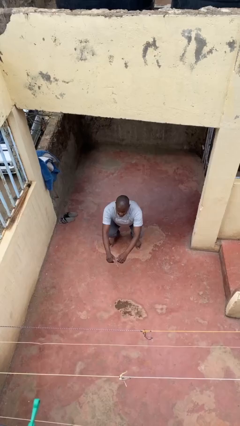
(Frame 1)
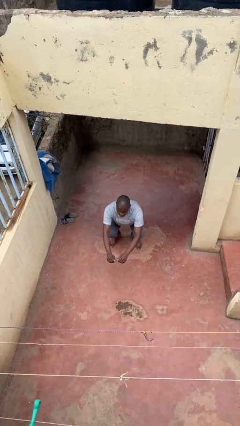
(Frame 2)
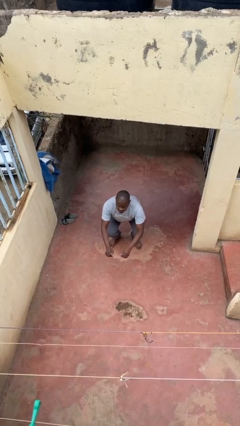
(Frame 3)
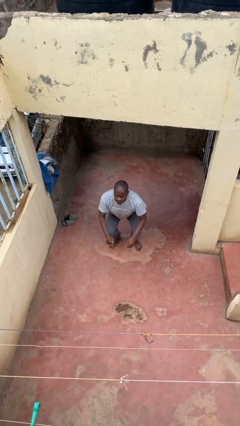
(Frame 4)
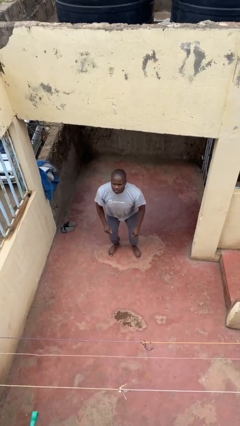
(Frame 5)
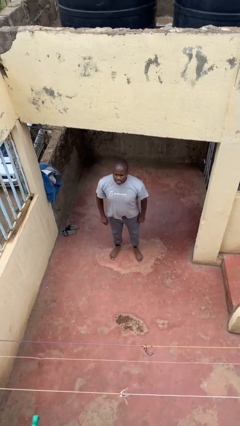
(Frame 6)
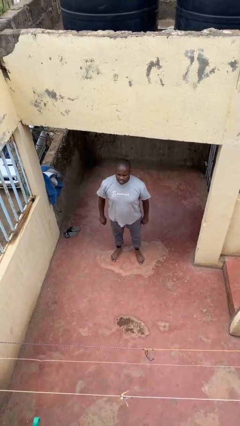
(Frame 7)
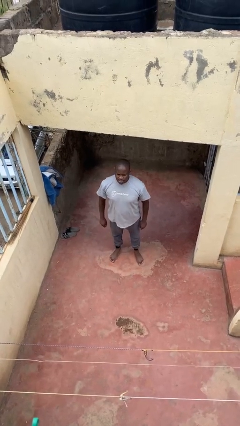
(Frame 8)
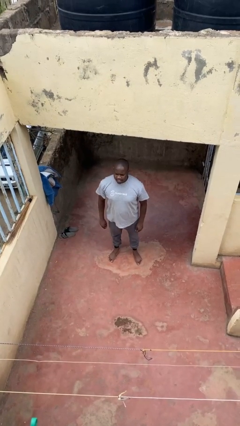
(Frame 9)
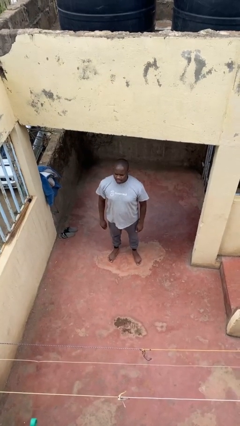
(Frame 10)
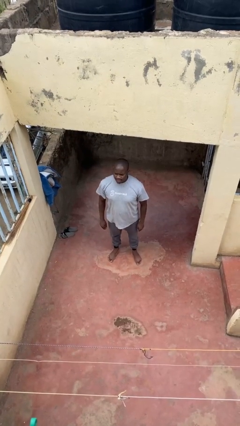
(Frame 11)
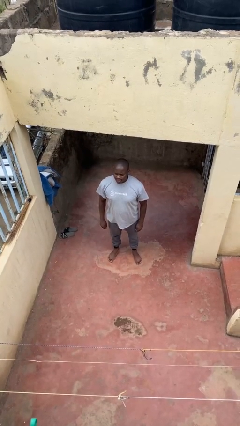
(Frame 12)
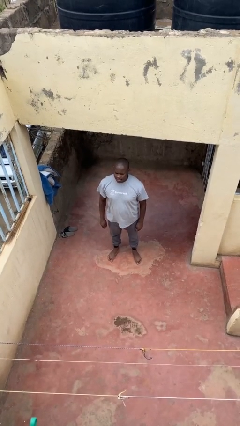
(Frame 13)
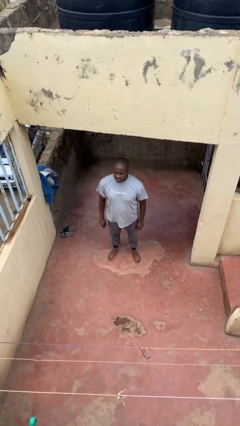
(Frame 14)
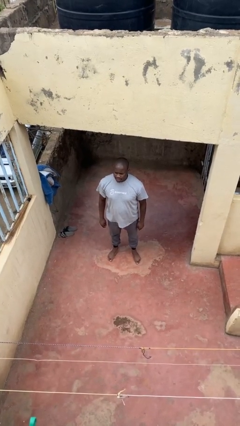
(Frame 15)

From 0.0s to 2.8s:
person stands up

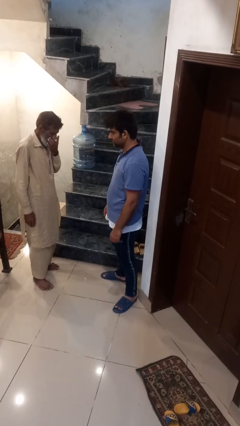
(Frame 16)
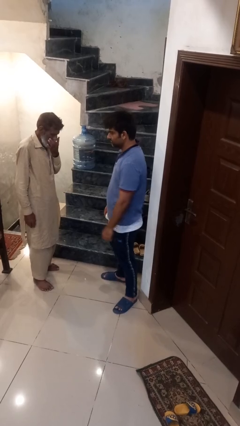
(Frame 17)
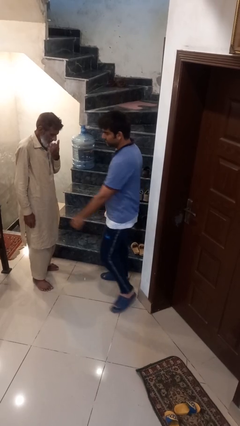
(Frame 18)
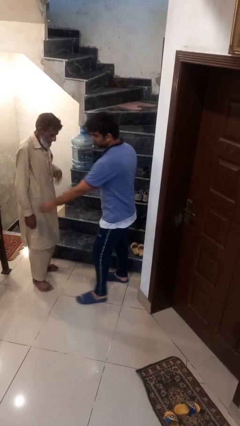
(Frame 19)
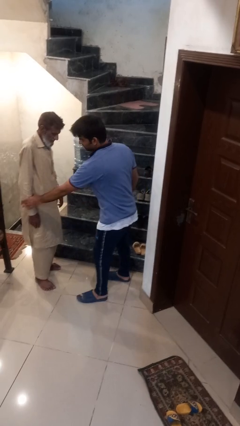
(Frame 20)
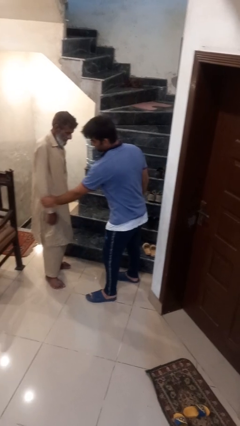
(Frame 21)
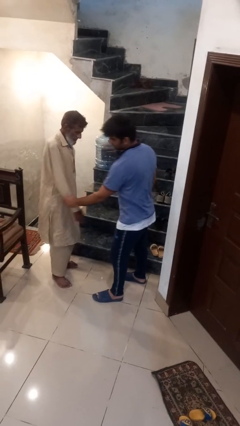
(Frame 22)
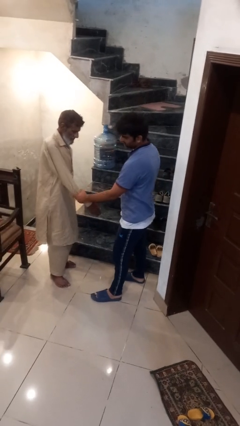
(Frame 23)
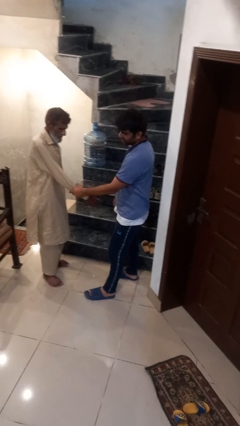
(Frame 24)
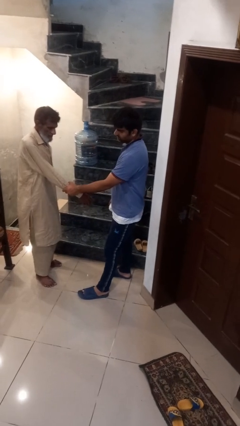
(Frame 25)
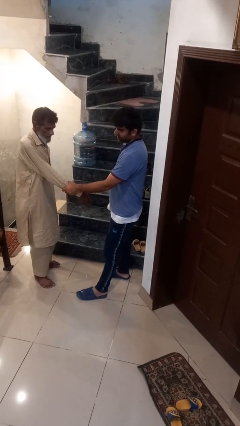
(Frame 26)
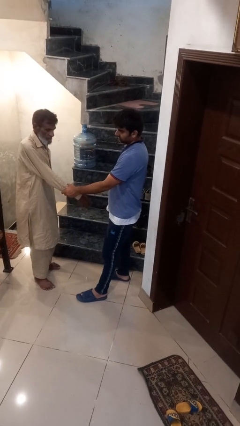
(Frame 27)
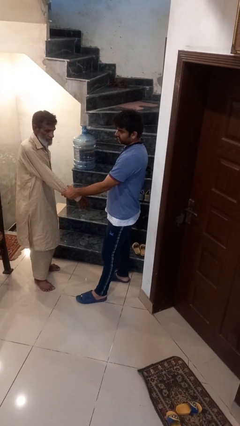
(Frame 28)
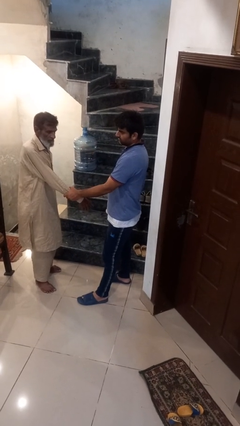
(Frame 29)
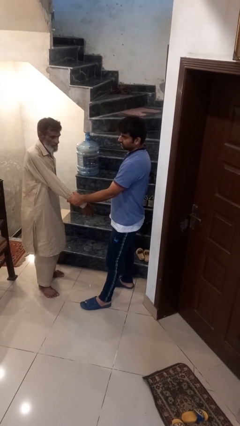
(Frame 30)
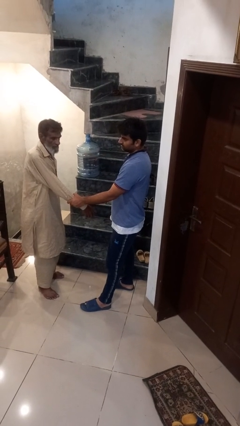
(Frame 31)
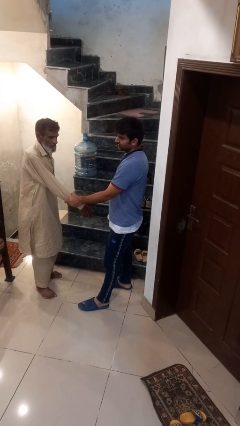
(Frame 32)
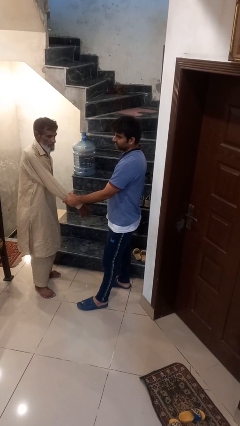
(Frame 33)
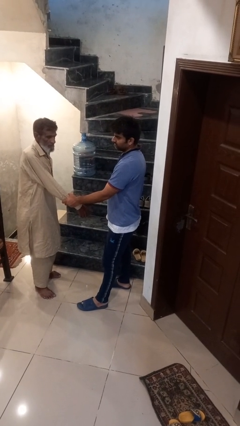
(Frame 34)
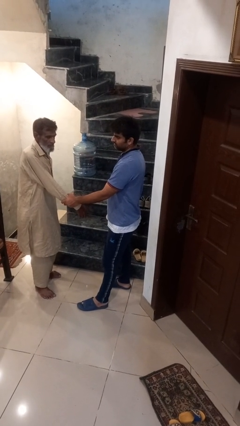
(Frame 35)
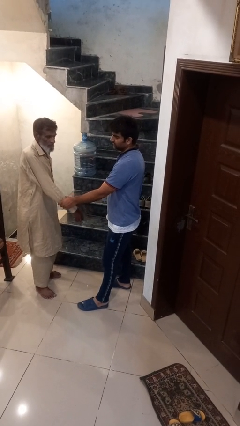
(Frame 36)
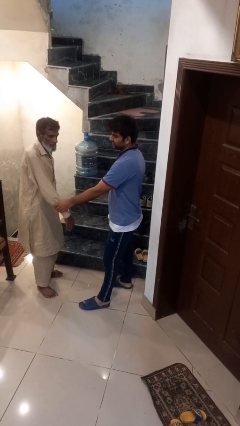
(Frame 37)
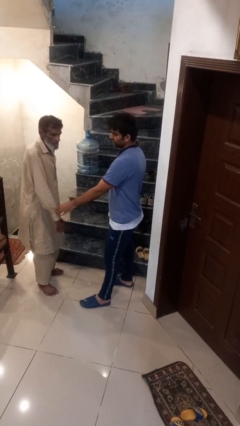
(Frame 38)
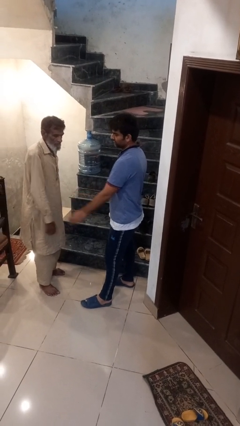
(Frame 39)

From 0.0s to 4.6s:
person grabs person by forearm

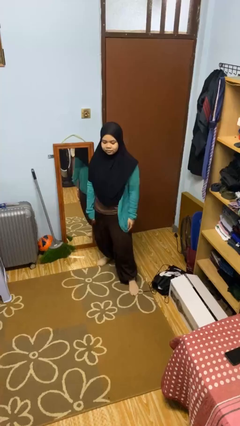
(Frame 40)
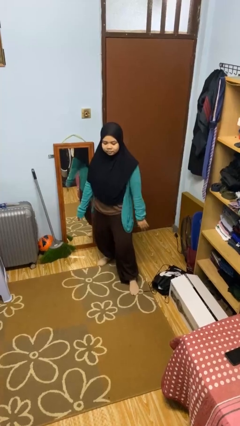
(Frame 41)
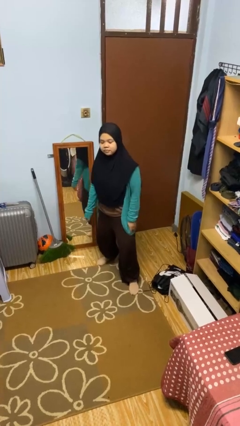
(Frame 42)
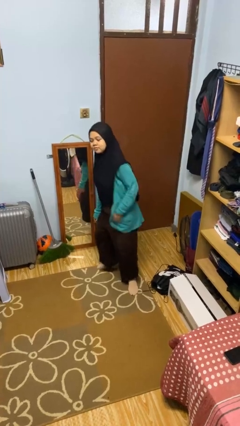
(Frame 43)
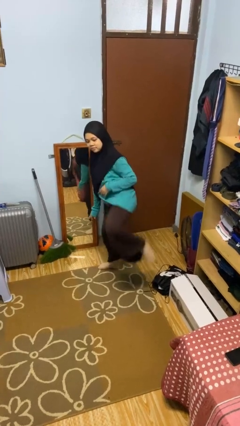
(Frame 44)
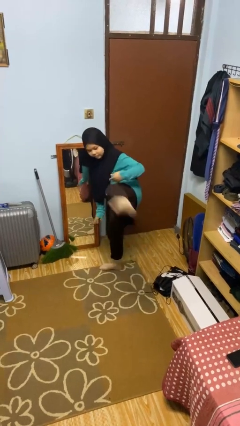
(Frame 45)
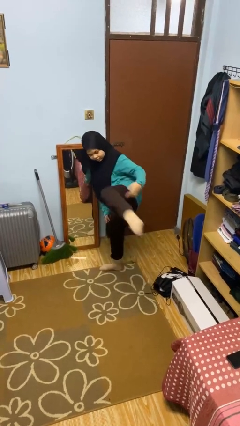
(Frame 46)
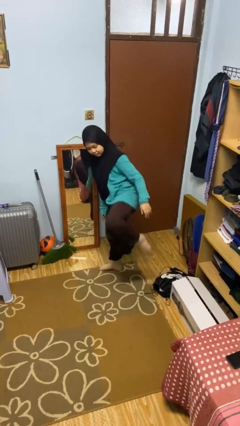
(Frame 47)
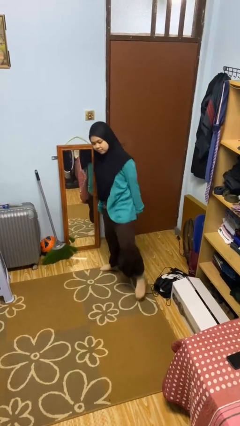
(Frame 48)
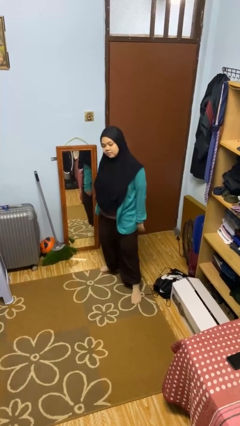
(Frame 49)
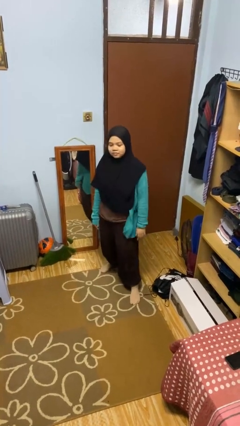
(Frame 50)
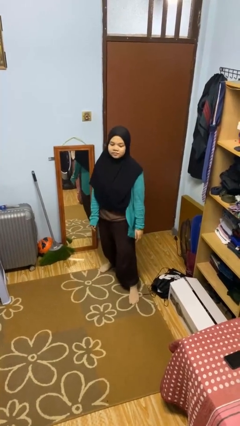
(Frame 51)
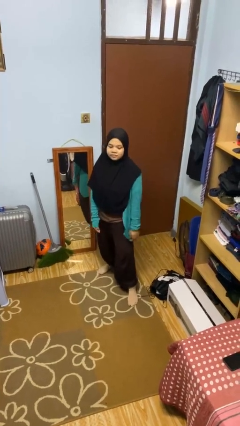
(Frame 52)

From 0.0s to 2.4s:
person karate kicks

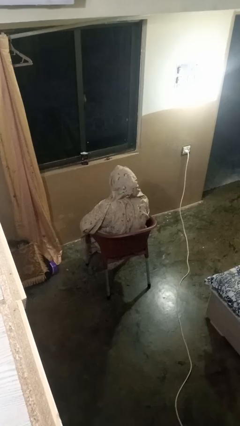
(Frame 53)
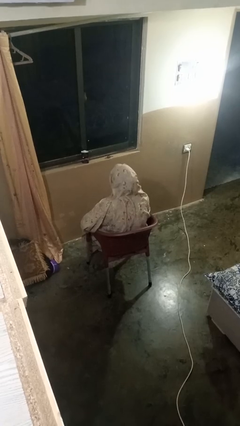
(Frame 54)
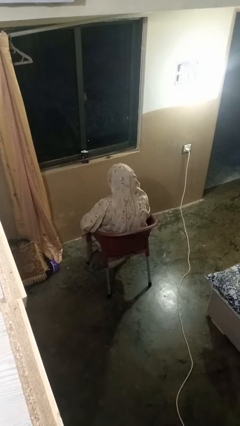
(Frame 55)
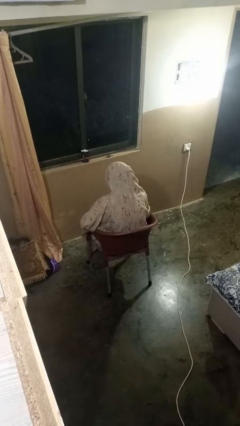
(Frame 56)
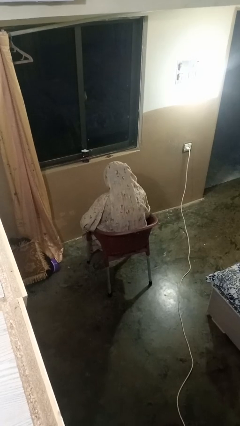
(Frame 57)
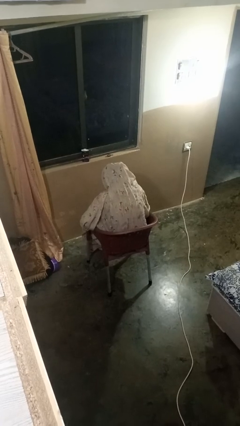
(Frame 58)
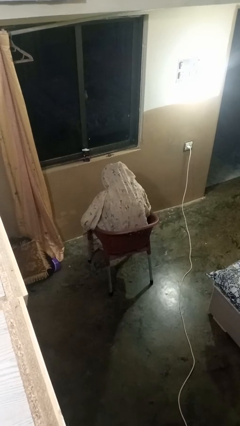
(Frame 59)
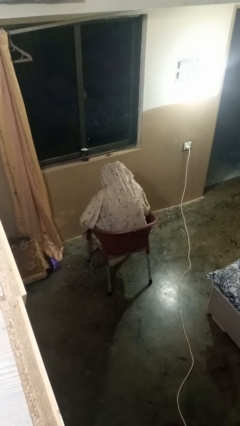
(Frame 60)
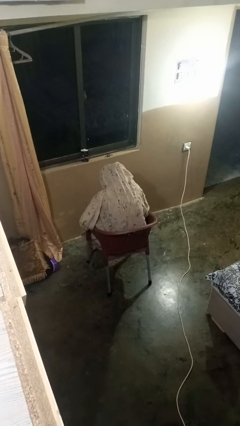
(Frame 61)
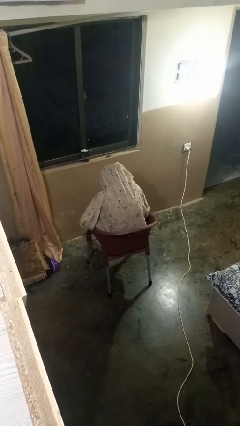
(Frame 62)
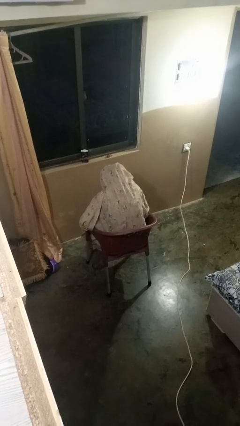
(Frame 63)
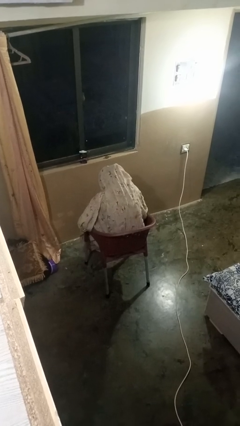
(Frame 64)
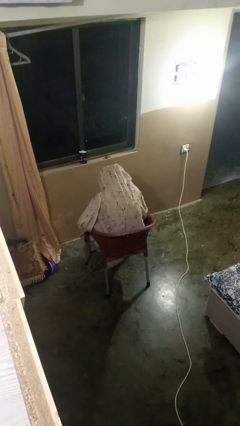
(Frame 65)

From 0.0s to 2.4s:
person looks at hands in lap

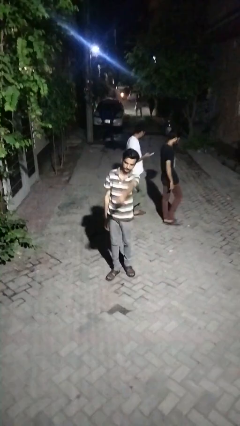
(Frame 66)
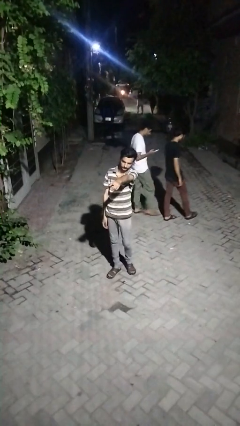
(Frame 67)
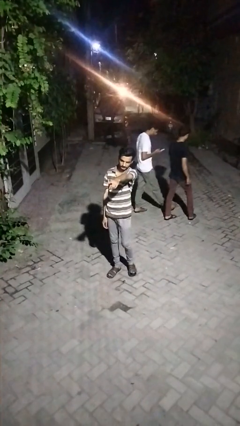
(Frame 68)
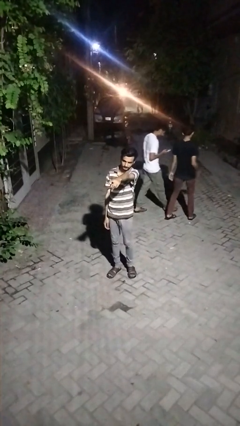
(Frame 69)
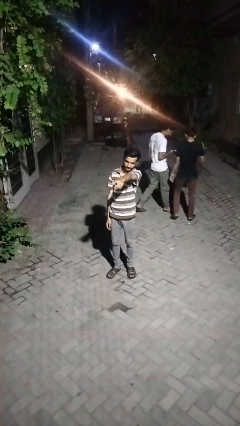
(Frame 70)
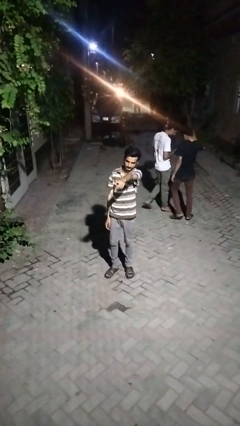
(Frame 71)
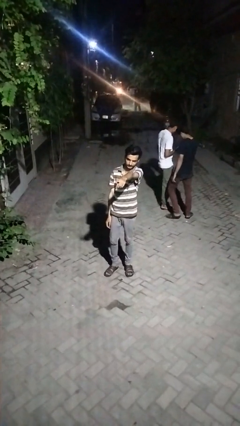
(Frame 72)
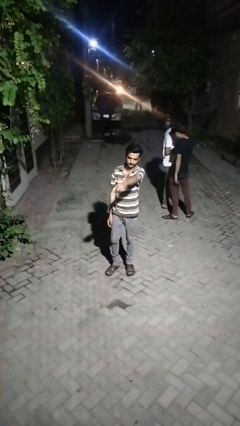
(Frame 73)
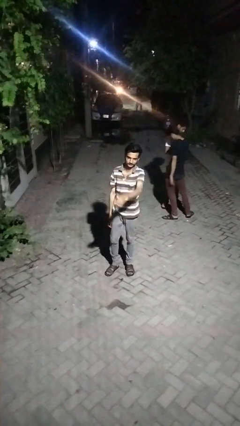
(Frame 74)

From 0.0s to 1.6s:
person points at person

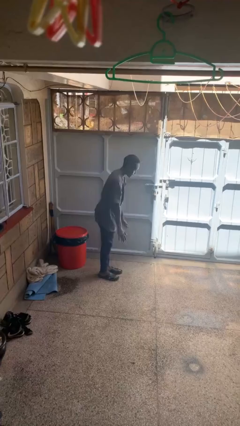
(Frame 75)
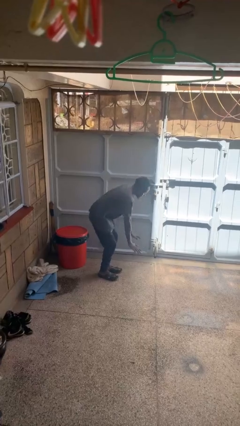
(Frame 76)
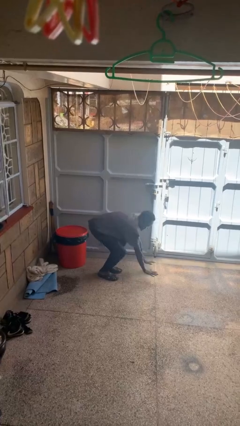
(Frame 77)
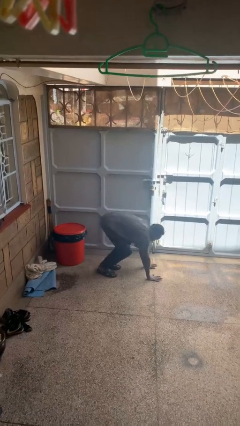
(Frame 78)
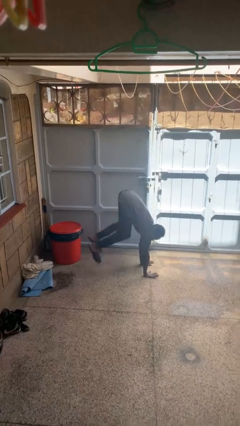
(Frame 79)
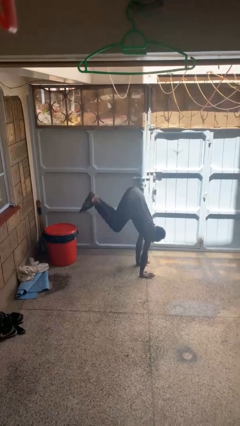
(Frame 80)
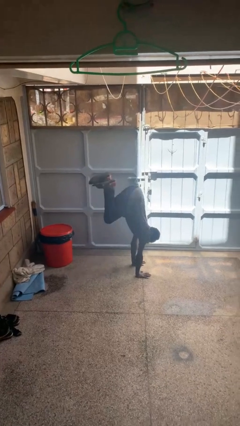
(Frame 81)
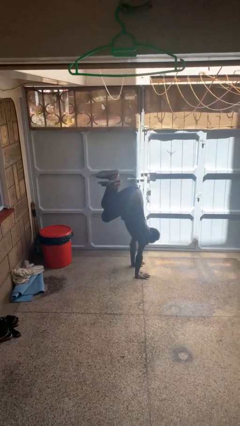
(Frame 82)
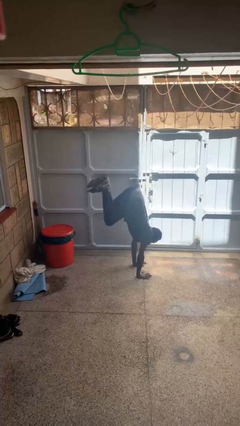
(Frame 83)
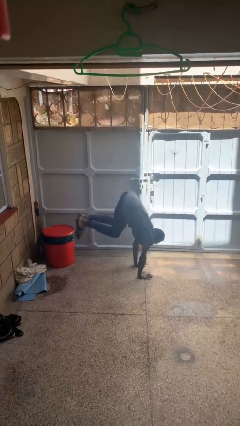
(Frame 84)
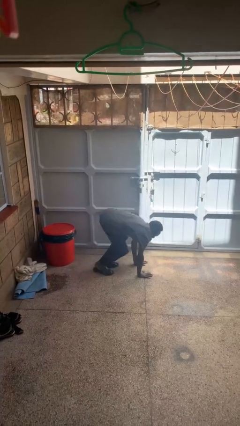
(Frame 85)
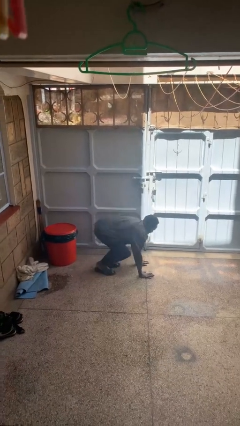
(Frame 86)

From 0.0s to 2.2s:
person handstand

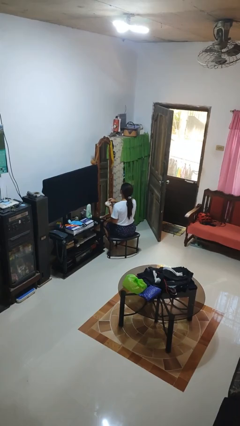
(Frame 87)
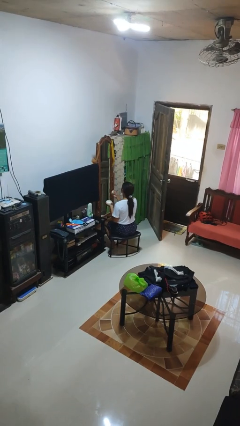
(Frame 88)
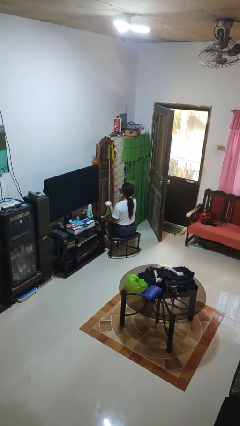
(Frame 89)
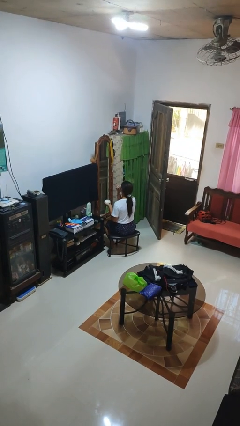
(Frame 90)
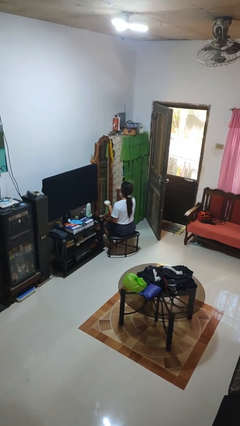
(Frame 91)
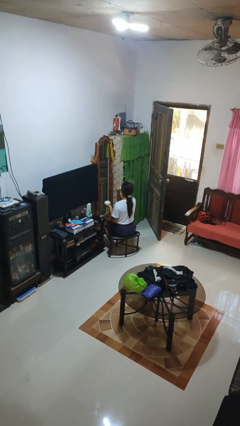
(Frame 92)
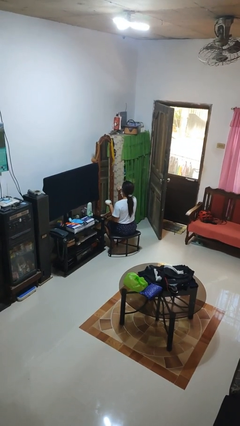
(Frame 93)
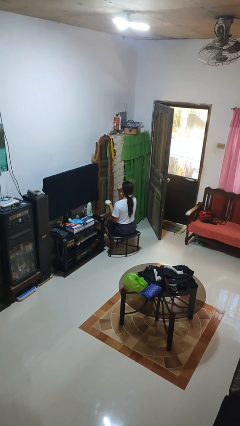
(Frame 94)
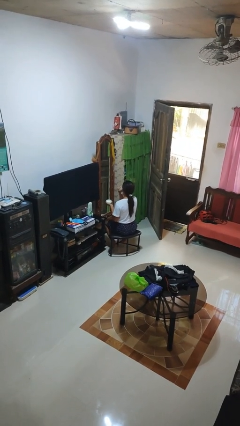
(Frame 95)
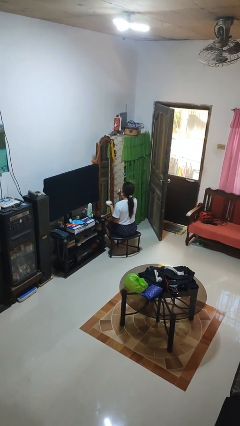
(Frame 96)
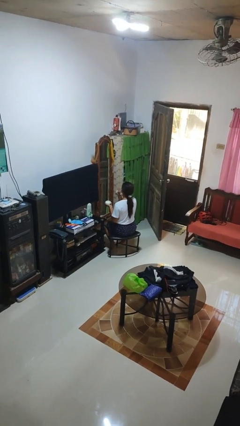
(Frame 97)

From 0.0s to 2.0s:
person applies foundation makeup
